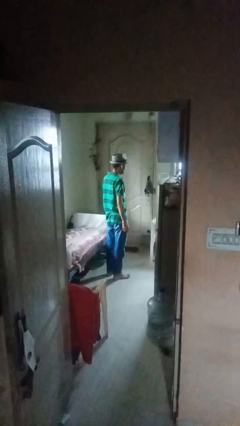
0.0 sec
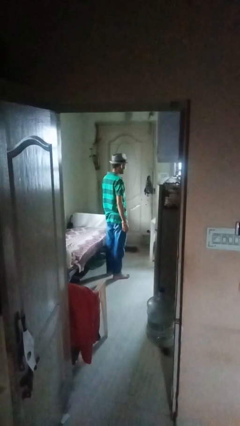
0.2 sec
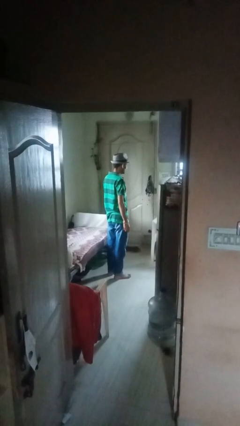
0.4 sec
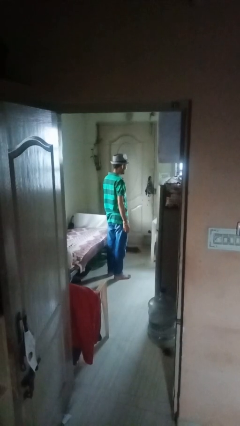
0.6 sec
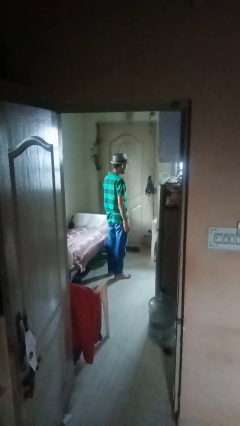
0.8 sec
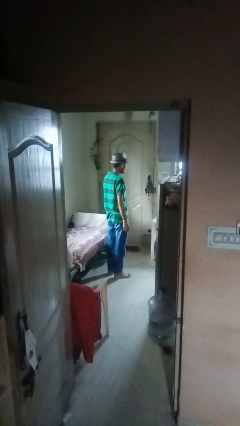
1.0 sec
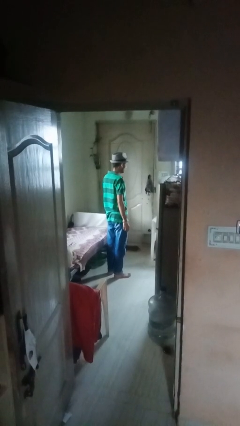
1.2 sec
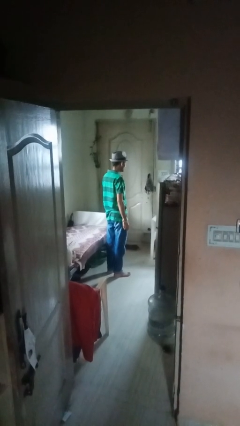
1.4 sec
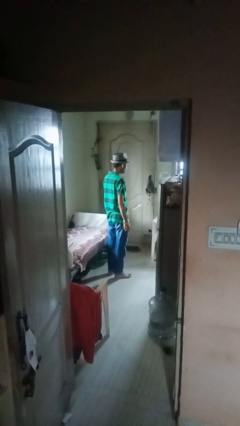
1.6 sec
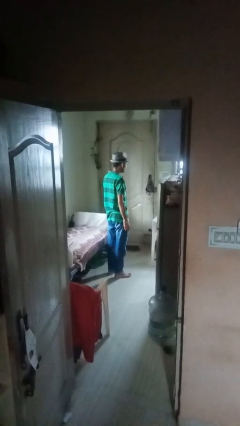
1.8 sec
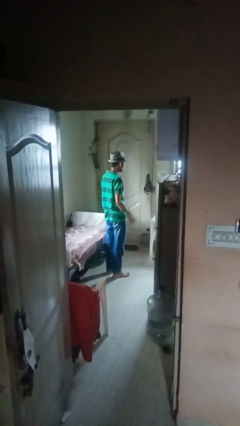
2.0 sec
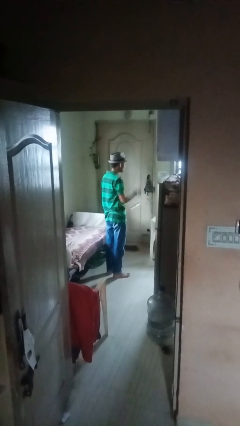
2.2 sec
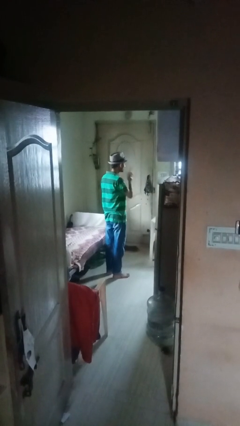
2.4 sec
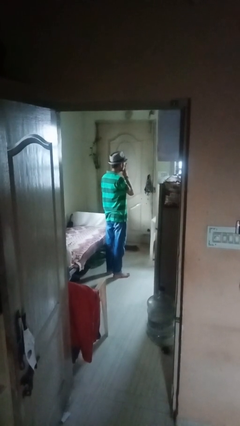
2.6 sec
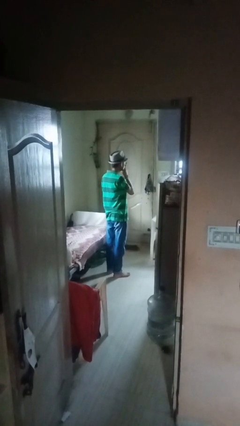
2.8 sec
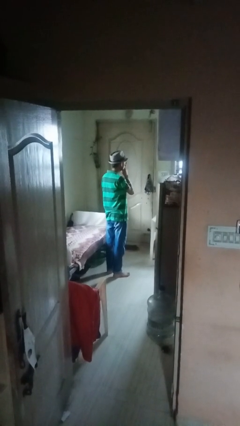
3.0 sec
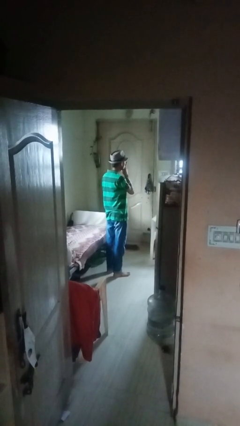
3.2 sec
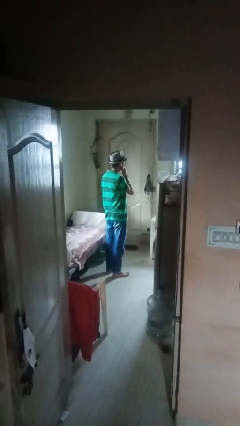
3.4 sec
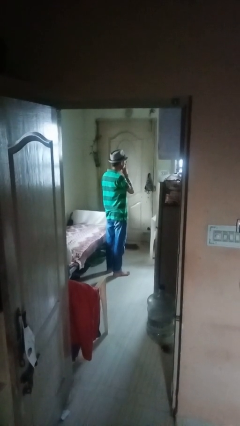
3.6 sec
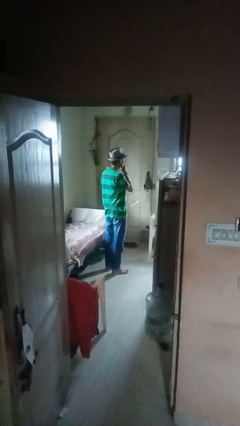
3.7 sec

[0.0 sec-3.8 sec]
person gestures be quiet

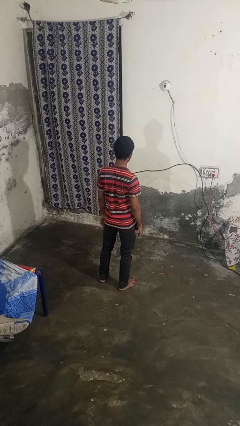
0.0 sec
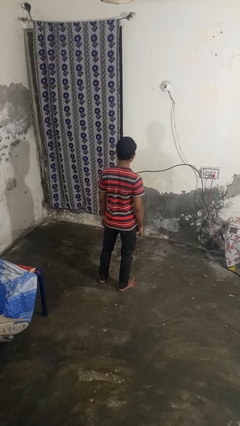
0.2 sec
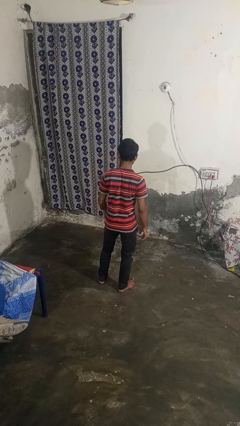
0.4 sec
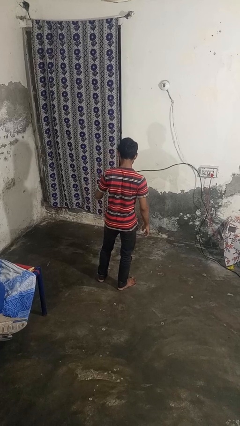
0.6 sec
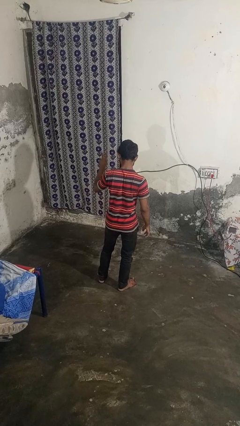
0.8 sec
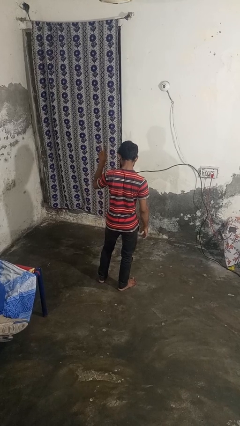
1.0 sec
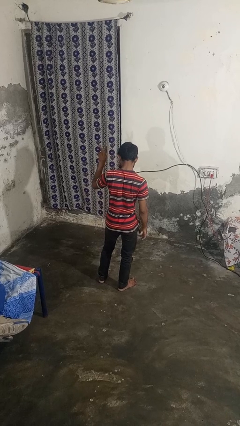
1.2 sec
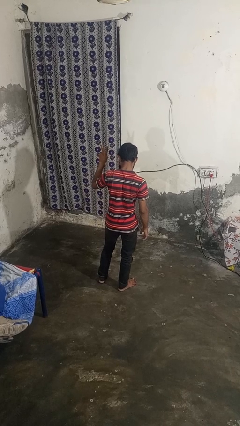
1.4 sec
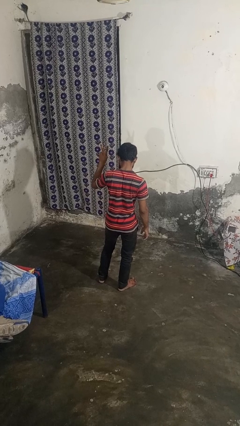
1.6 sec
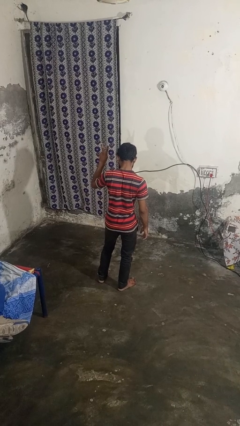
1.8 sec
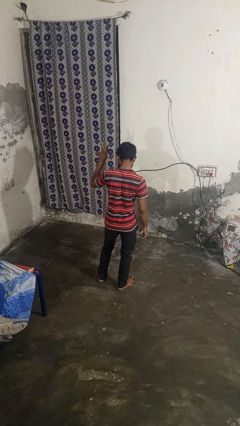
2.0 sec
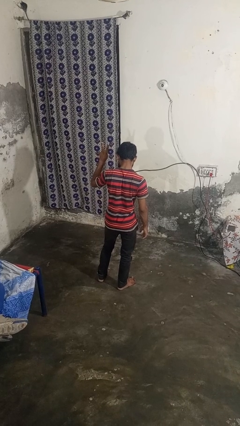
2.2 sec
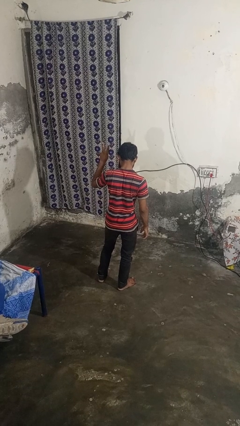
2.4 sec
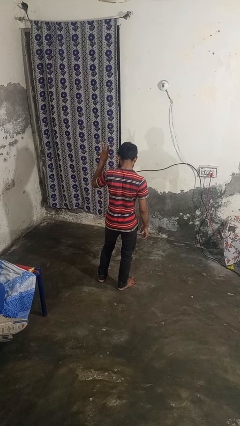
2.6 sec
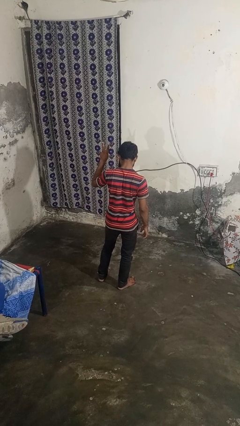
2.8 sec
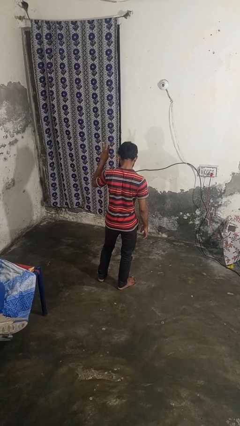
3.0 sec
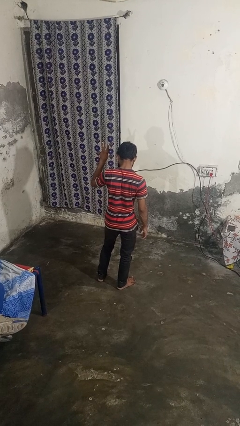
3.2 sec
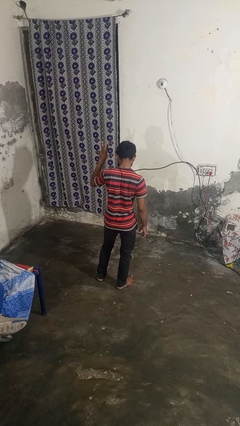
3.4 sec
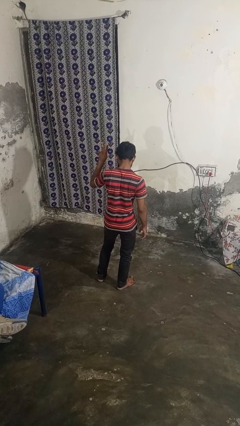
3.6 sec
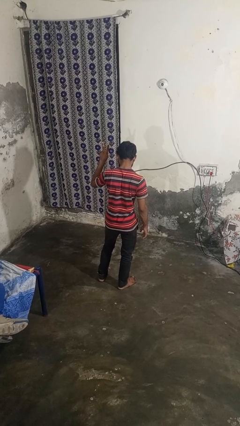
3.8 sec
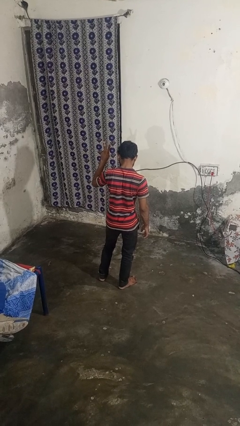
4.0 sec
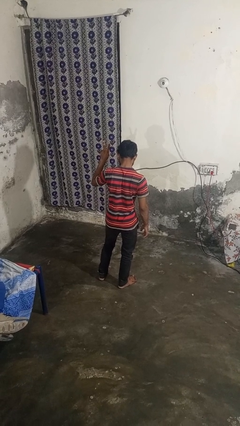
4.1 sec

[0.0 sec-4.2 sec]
person gestures peace

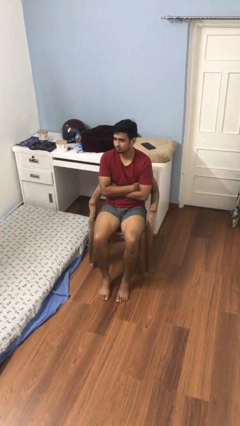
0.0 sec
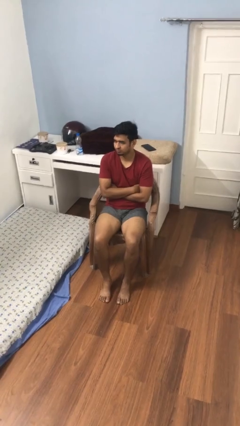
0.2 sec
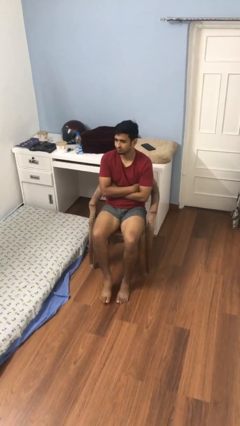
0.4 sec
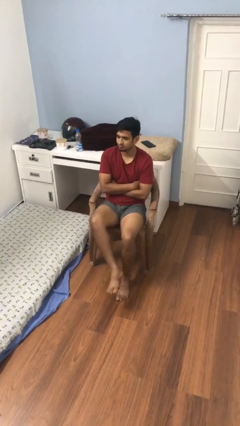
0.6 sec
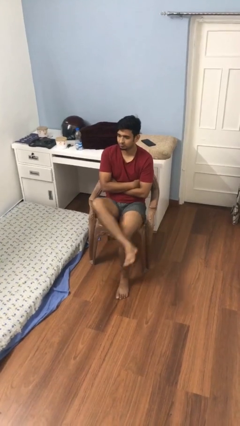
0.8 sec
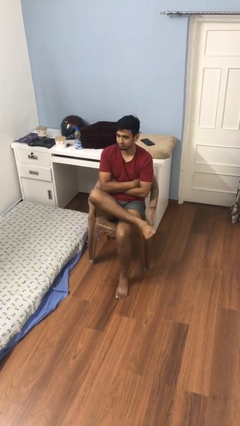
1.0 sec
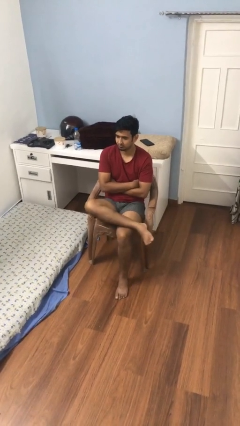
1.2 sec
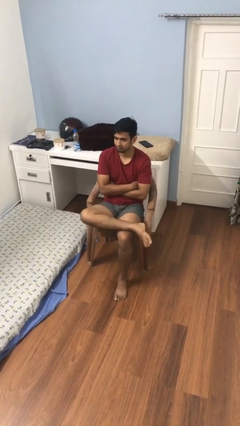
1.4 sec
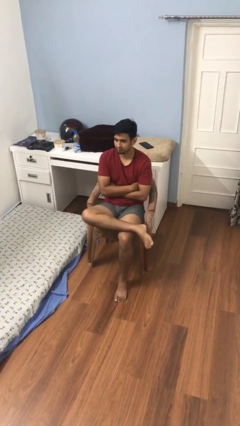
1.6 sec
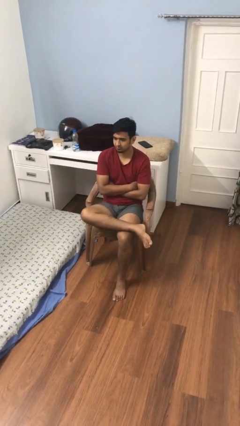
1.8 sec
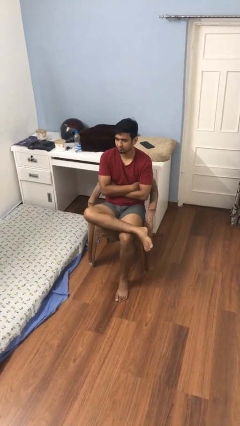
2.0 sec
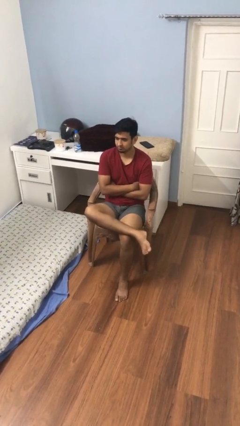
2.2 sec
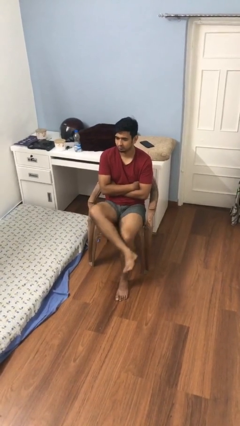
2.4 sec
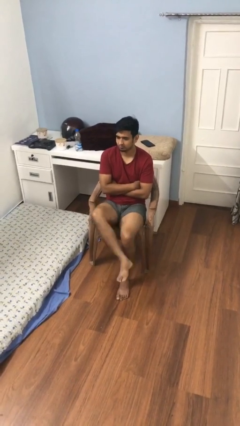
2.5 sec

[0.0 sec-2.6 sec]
person crosses legs

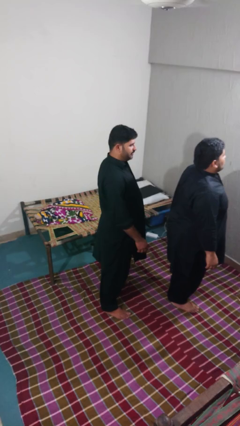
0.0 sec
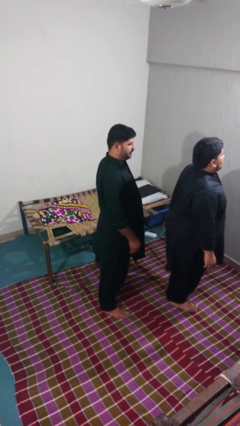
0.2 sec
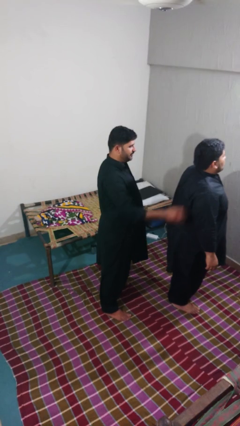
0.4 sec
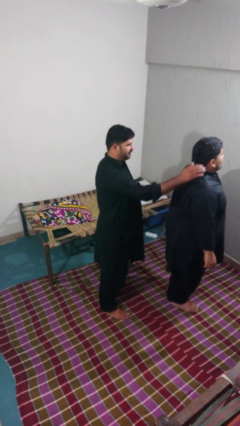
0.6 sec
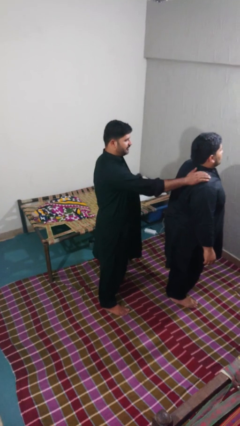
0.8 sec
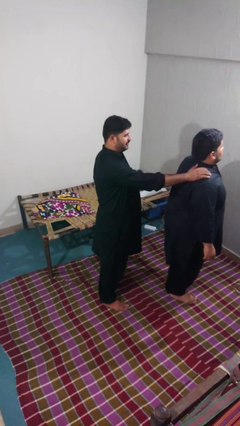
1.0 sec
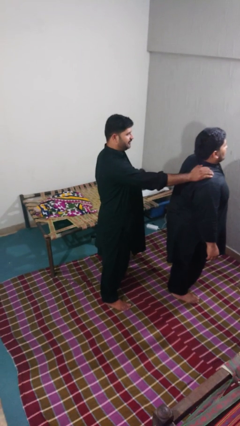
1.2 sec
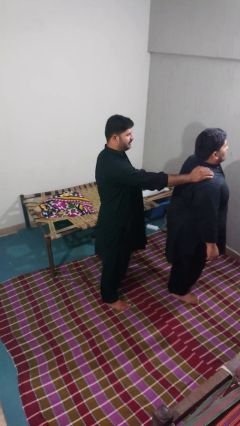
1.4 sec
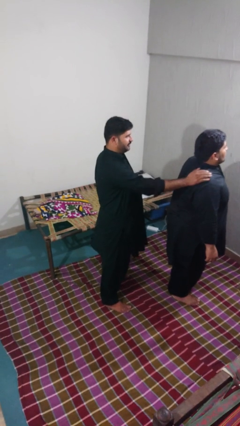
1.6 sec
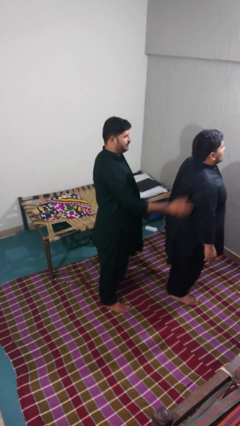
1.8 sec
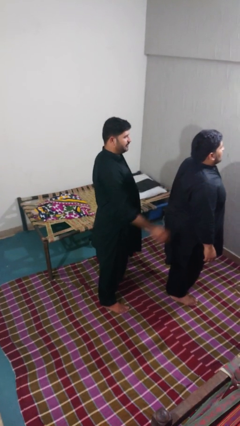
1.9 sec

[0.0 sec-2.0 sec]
person touches back of person

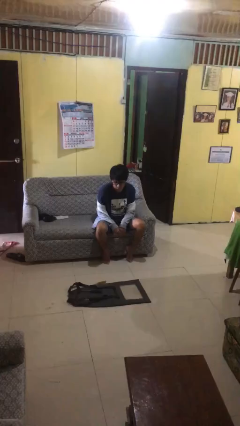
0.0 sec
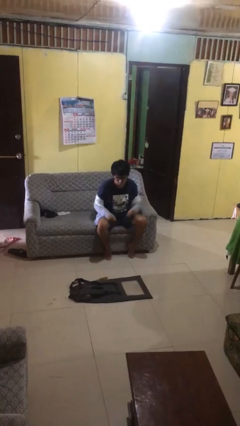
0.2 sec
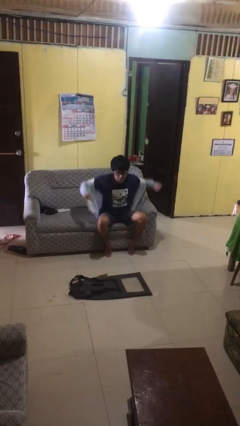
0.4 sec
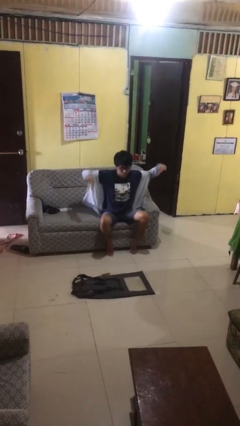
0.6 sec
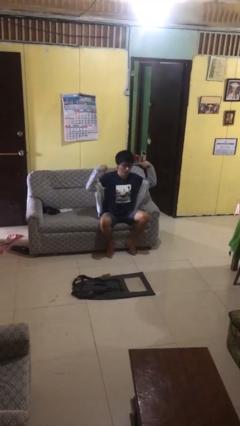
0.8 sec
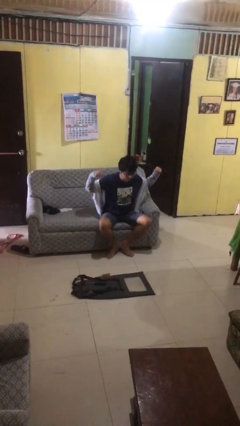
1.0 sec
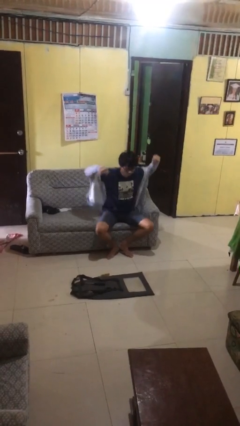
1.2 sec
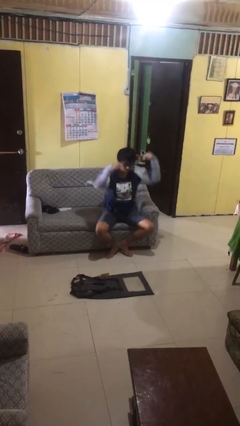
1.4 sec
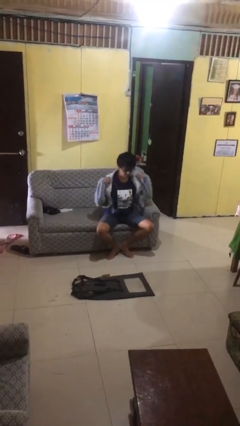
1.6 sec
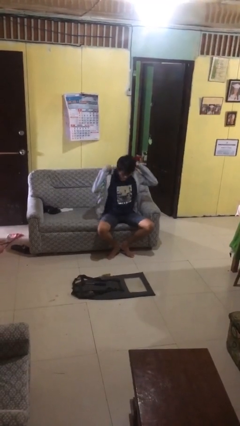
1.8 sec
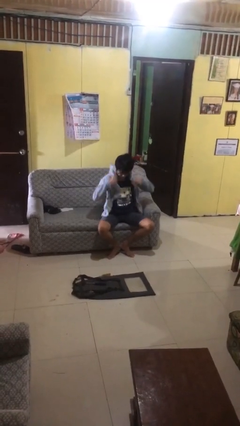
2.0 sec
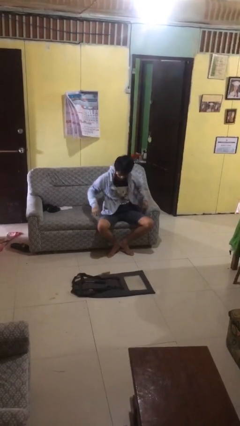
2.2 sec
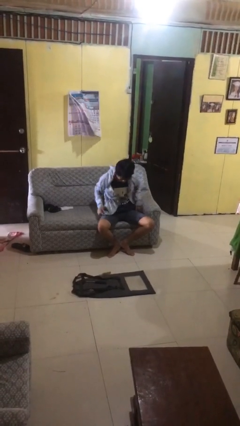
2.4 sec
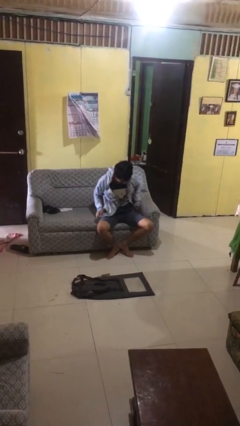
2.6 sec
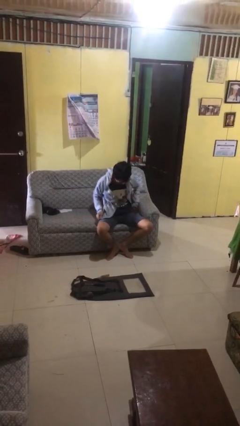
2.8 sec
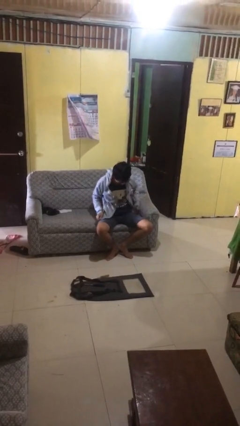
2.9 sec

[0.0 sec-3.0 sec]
person puts on jacket

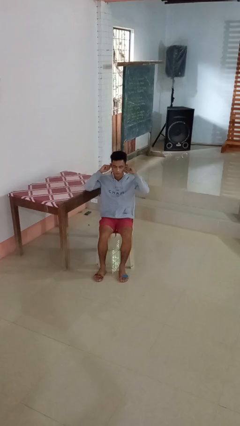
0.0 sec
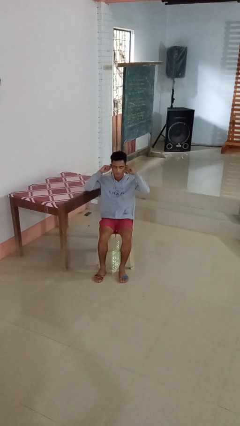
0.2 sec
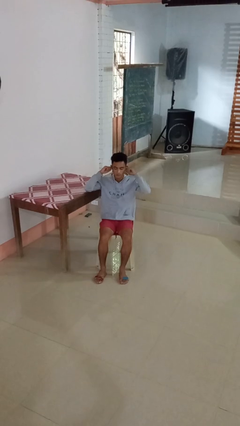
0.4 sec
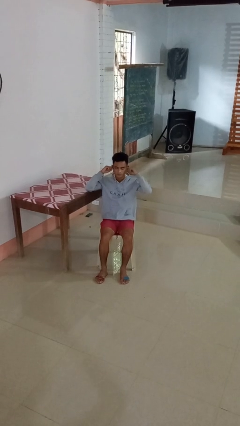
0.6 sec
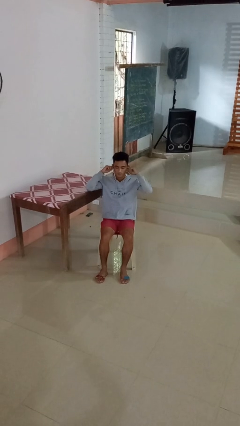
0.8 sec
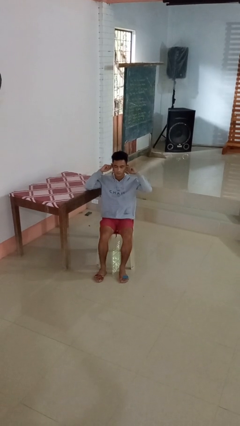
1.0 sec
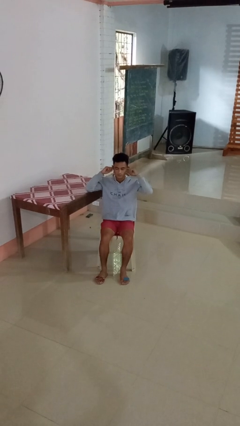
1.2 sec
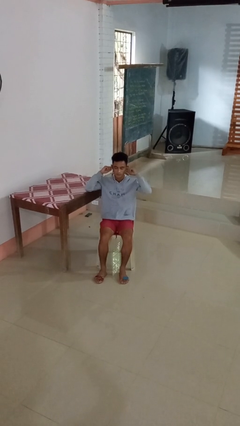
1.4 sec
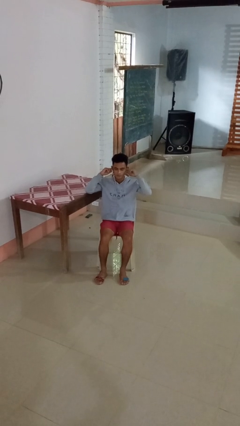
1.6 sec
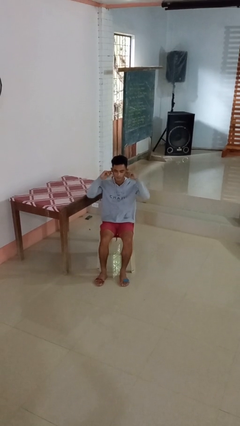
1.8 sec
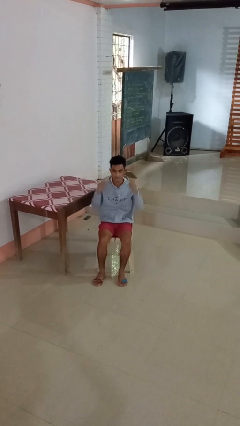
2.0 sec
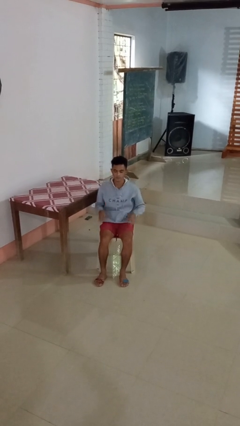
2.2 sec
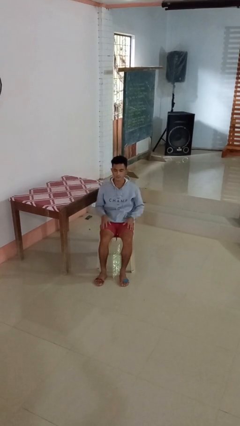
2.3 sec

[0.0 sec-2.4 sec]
person puts fingers in ear
